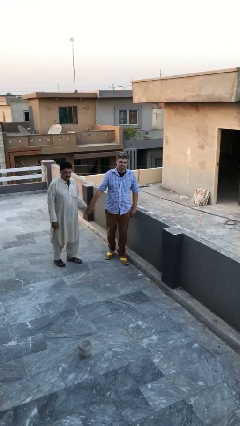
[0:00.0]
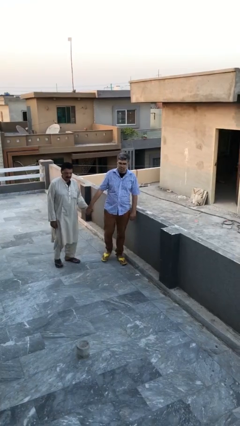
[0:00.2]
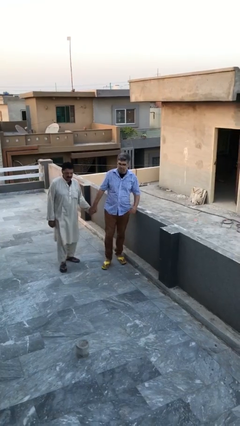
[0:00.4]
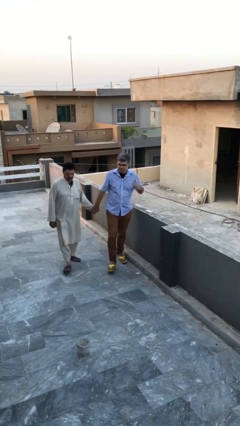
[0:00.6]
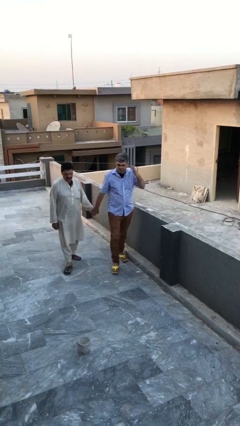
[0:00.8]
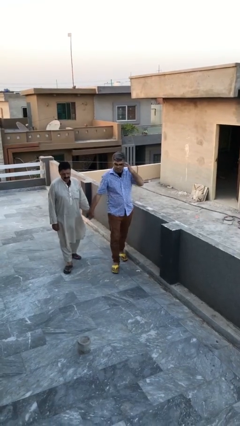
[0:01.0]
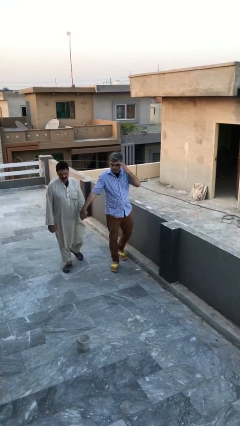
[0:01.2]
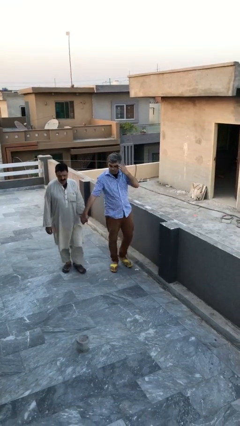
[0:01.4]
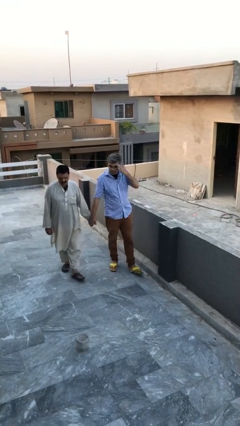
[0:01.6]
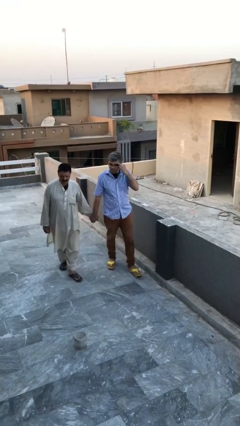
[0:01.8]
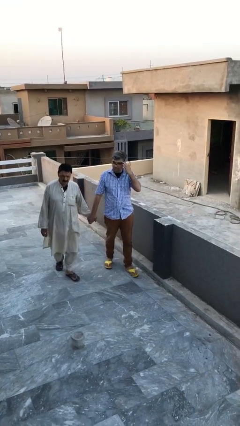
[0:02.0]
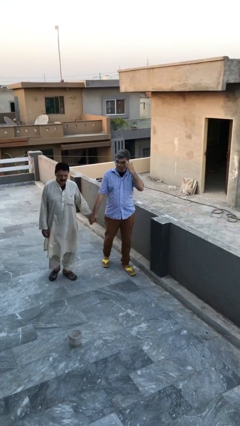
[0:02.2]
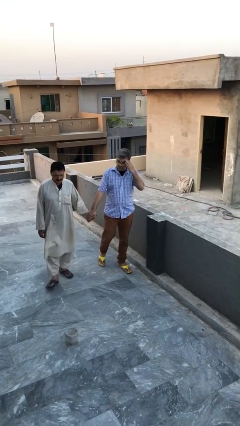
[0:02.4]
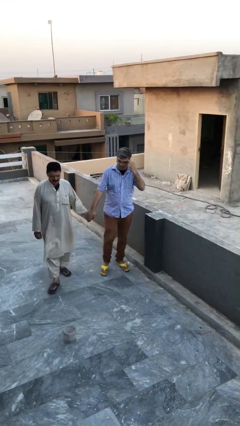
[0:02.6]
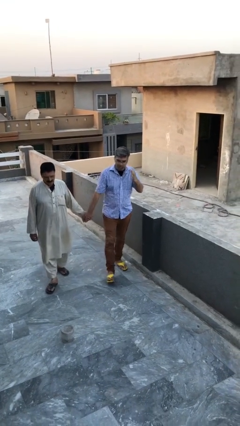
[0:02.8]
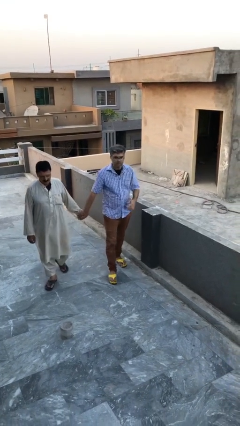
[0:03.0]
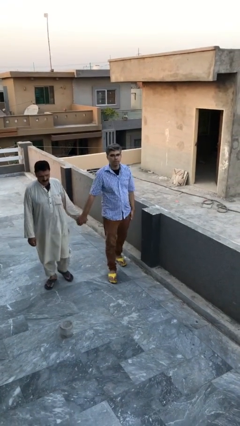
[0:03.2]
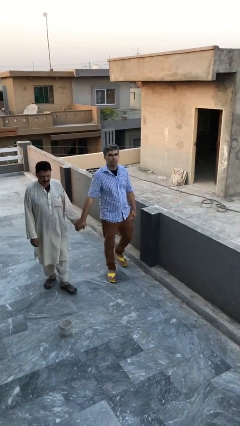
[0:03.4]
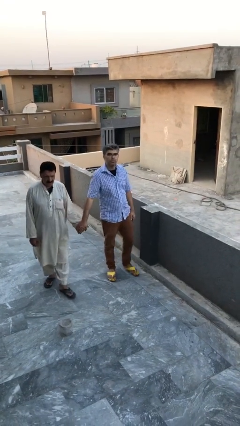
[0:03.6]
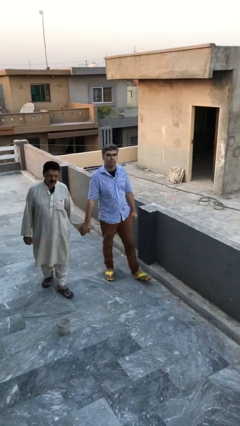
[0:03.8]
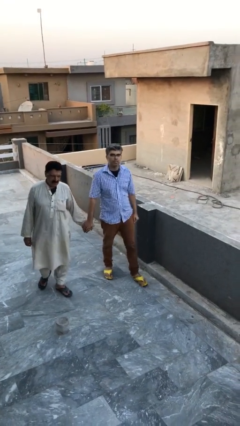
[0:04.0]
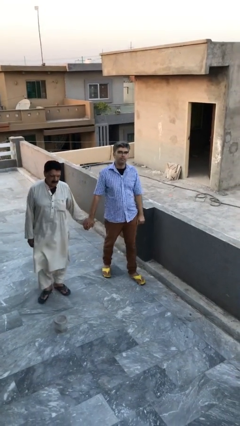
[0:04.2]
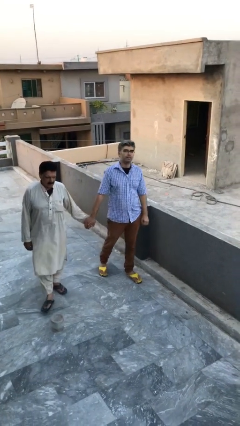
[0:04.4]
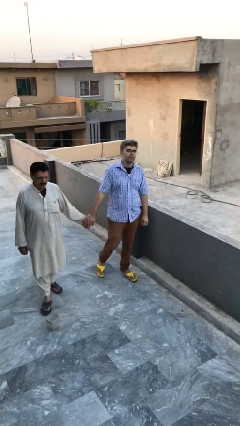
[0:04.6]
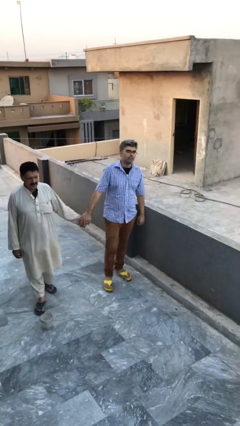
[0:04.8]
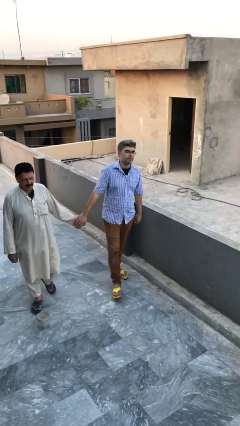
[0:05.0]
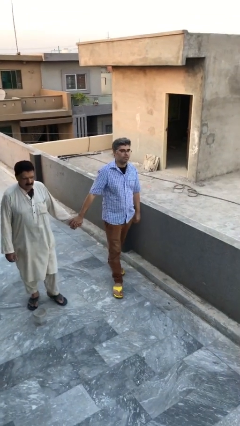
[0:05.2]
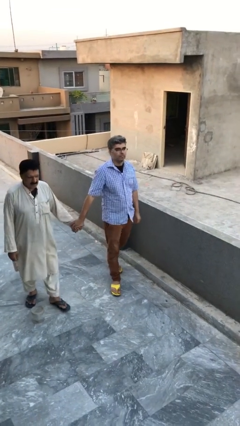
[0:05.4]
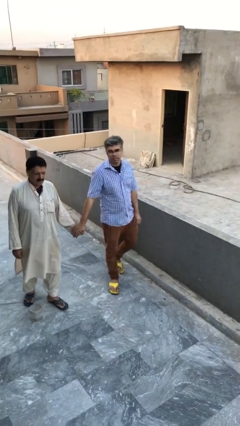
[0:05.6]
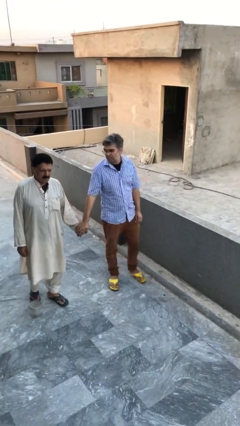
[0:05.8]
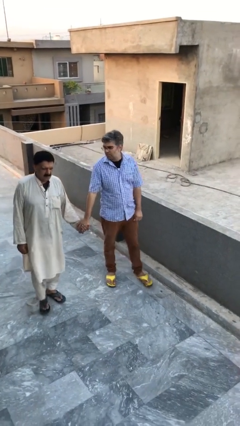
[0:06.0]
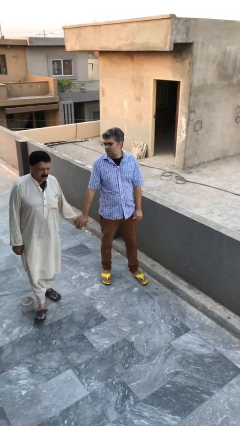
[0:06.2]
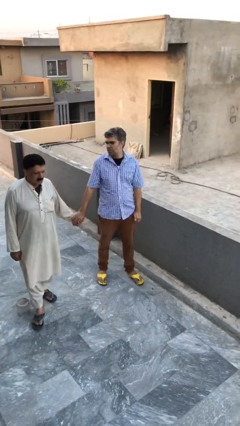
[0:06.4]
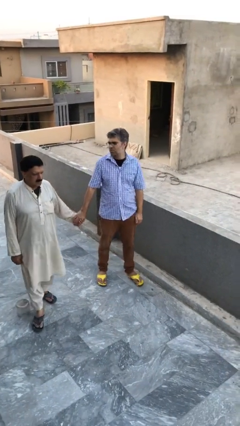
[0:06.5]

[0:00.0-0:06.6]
person holds hand

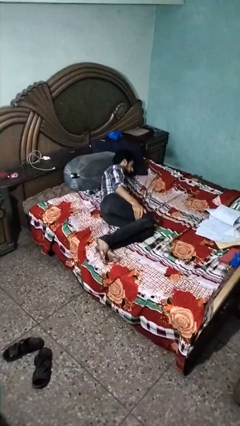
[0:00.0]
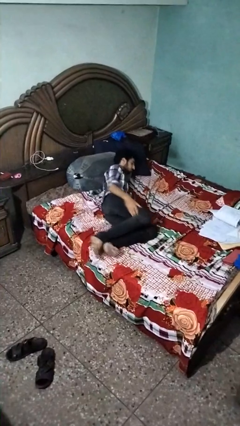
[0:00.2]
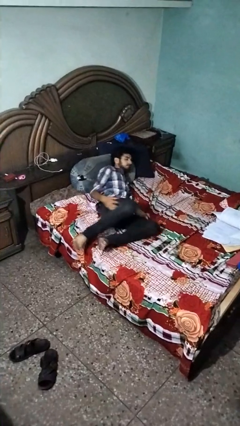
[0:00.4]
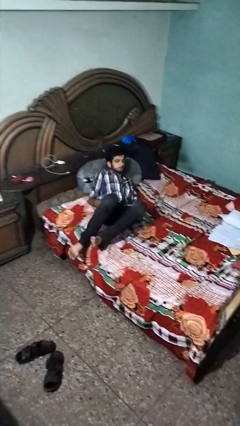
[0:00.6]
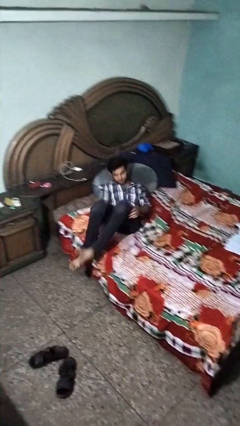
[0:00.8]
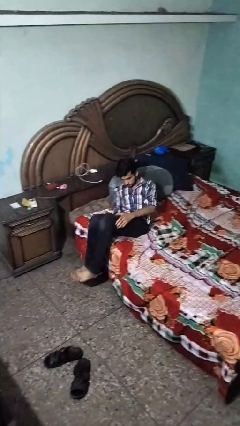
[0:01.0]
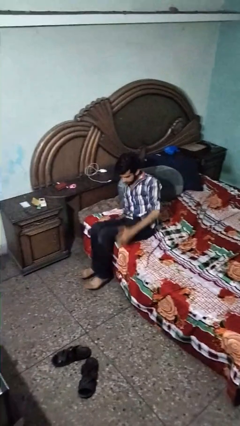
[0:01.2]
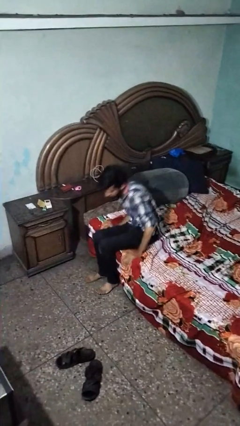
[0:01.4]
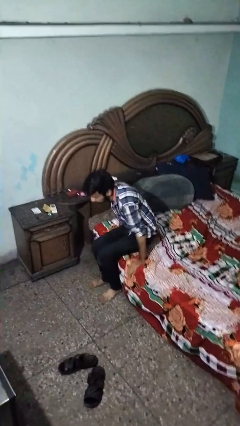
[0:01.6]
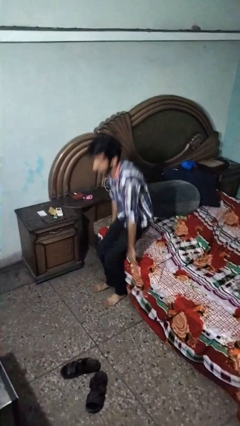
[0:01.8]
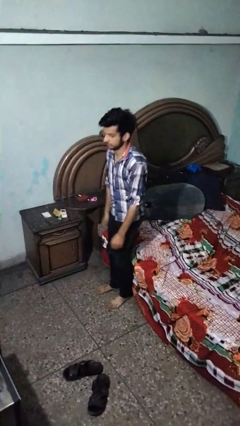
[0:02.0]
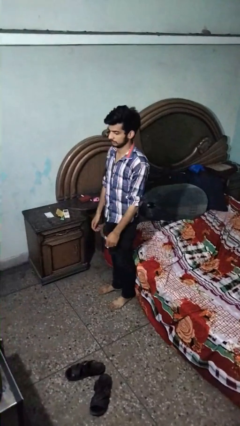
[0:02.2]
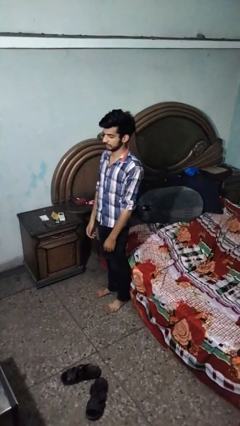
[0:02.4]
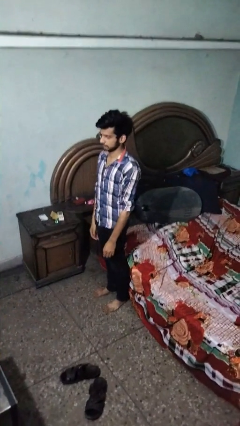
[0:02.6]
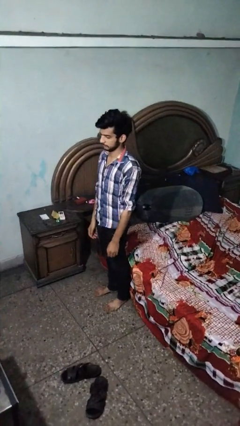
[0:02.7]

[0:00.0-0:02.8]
person stands up

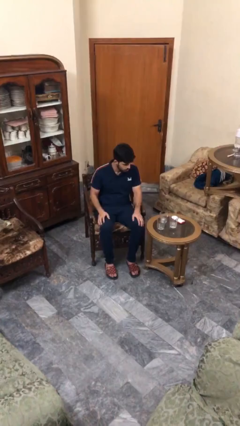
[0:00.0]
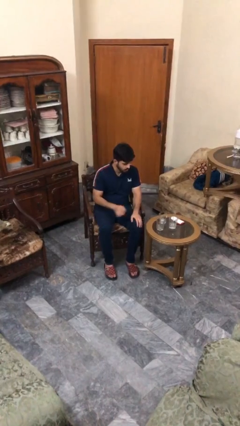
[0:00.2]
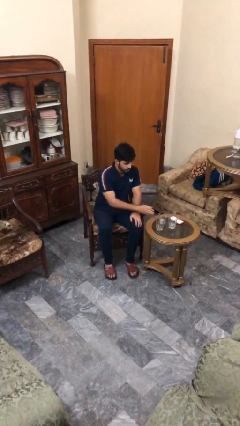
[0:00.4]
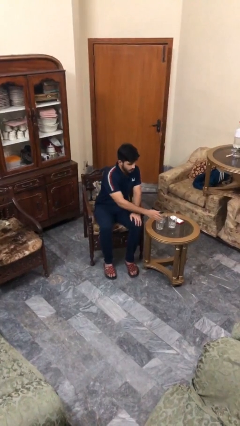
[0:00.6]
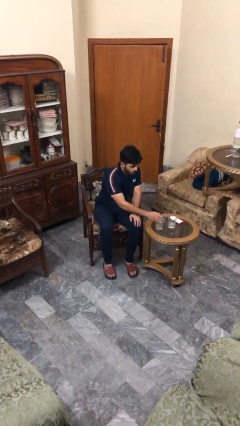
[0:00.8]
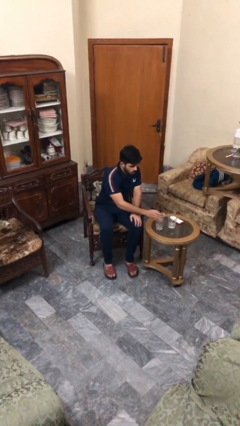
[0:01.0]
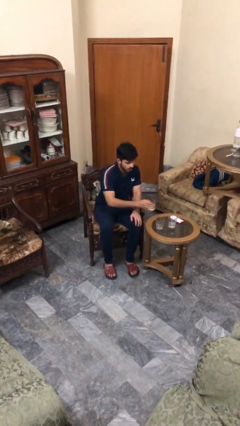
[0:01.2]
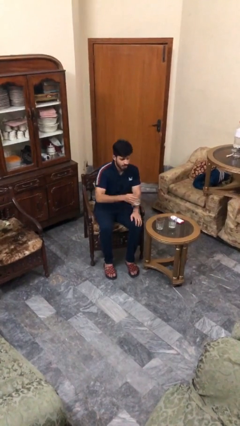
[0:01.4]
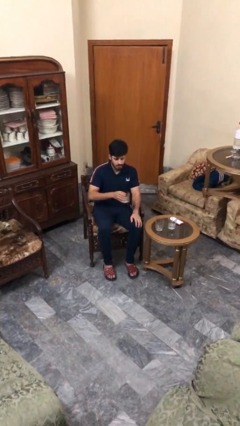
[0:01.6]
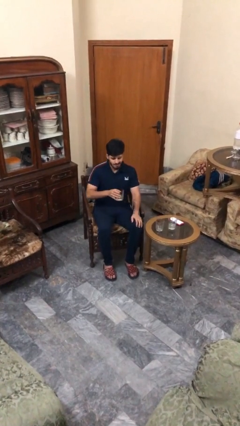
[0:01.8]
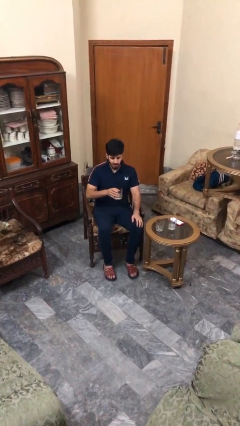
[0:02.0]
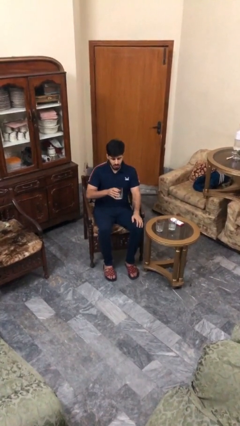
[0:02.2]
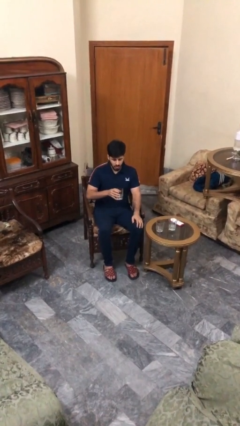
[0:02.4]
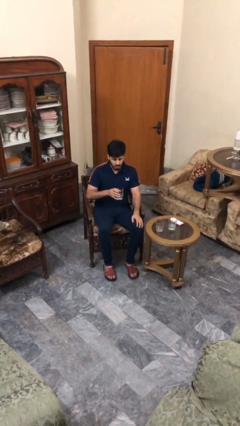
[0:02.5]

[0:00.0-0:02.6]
person picks up object from table

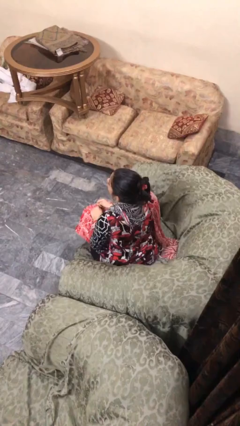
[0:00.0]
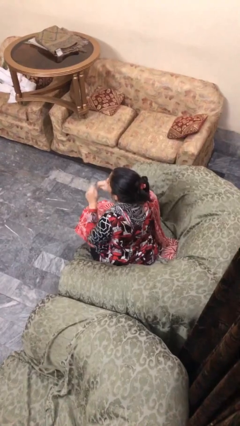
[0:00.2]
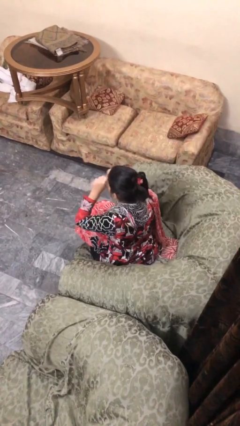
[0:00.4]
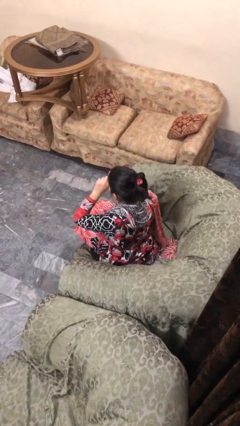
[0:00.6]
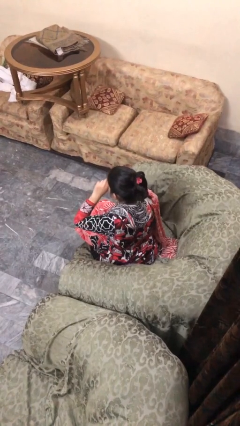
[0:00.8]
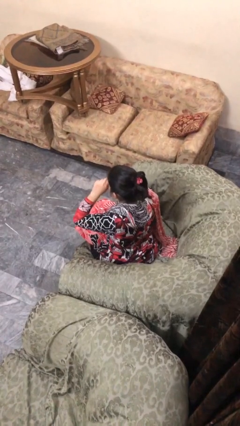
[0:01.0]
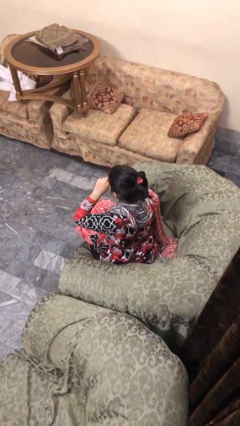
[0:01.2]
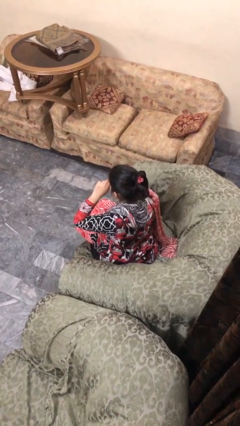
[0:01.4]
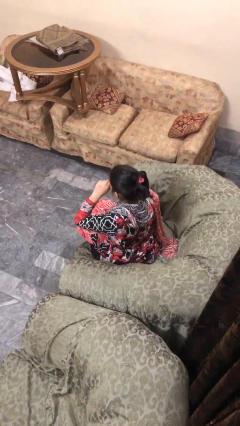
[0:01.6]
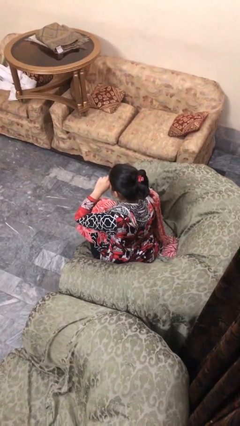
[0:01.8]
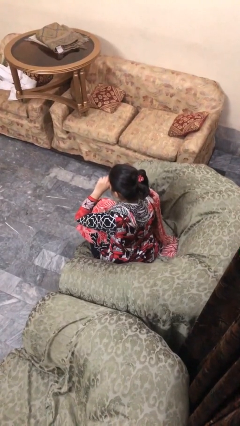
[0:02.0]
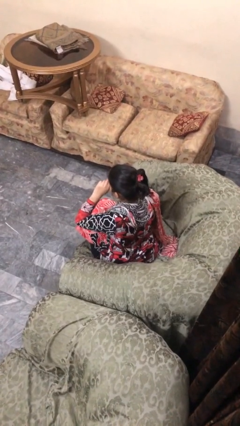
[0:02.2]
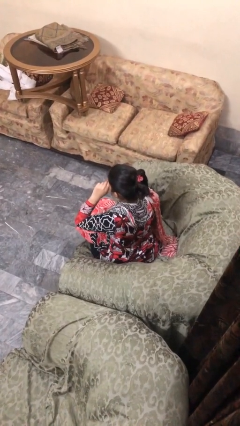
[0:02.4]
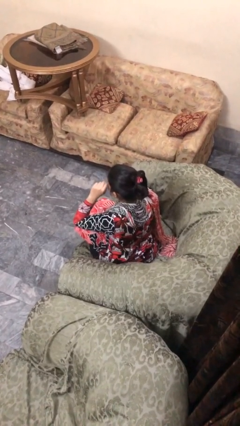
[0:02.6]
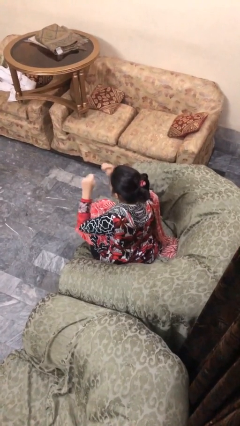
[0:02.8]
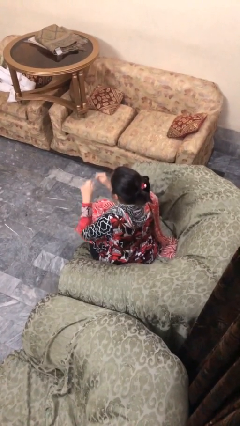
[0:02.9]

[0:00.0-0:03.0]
person rubs eyes

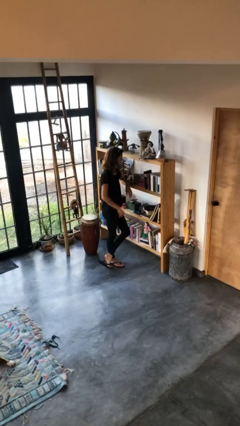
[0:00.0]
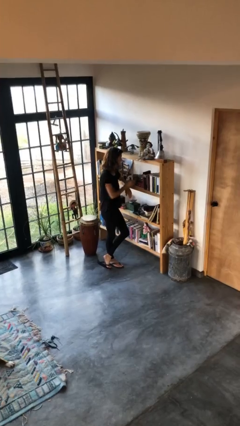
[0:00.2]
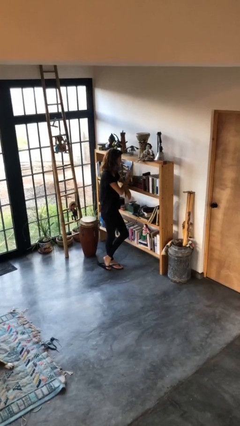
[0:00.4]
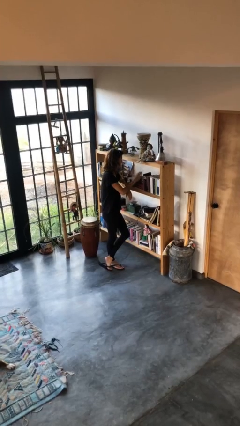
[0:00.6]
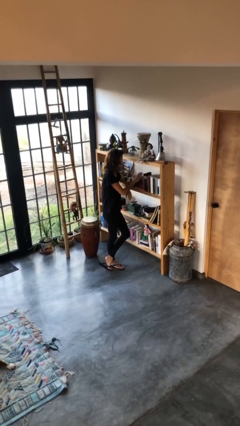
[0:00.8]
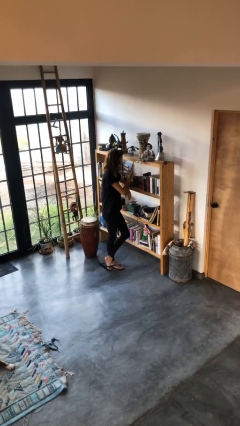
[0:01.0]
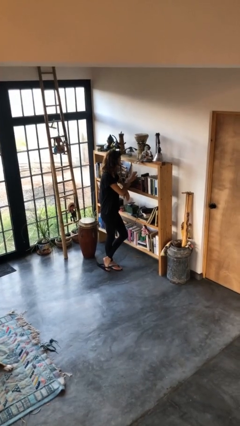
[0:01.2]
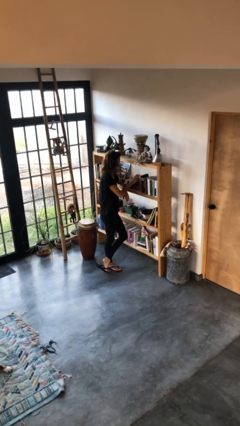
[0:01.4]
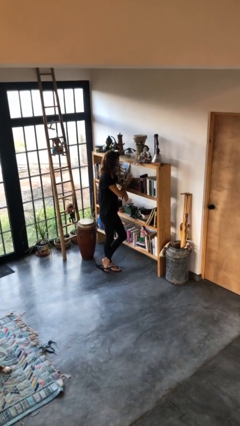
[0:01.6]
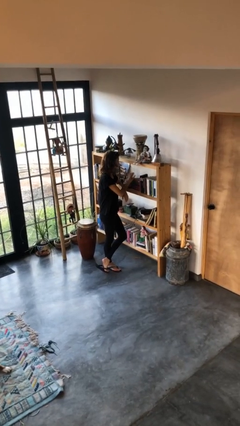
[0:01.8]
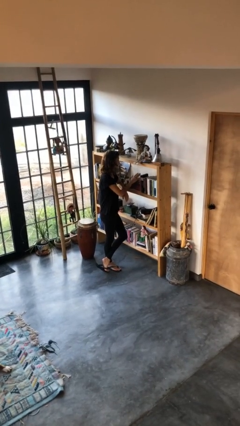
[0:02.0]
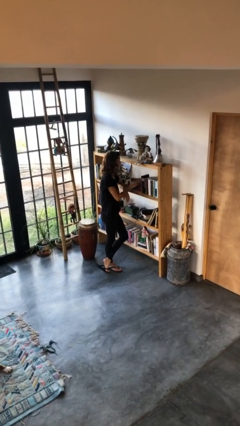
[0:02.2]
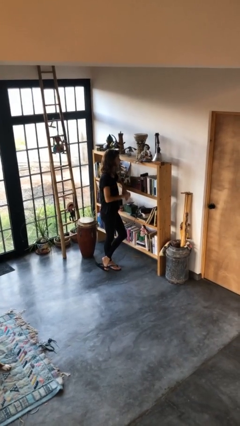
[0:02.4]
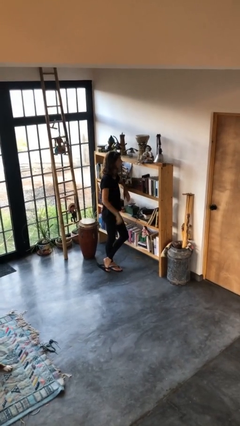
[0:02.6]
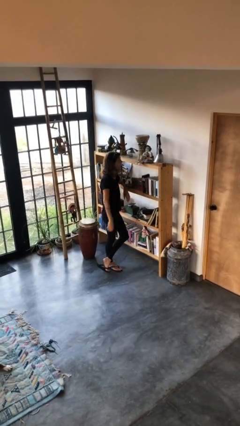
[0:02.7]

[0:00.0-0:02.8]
person waves hand over object

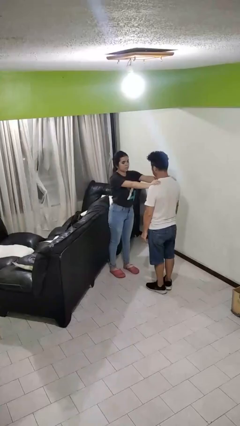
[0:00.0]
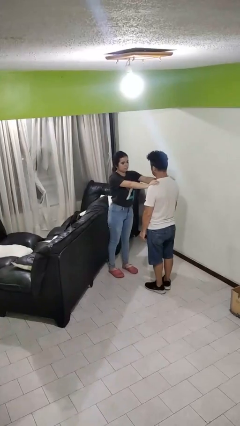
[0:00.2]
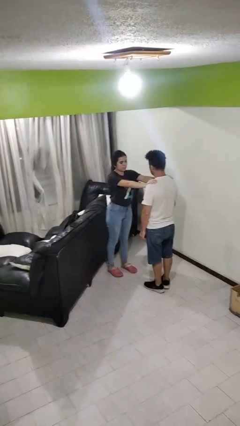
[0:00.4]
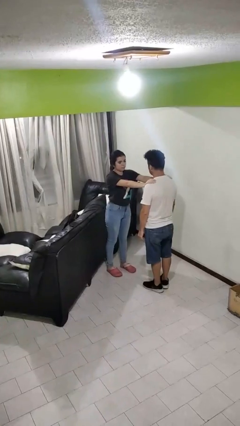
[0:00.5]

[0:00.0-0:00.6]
person grabs person by shoulder
